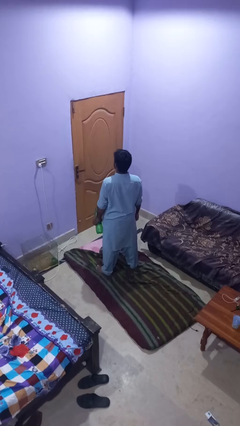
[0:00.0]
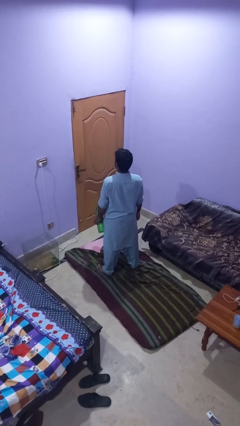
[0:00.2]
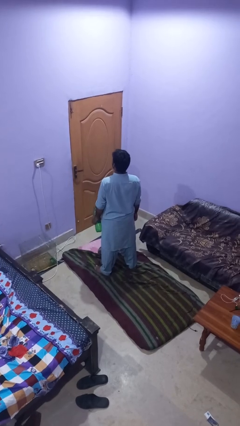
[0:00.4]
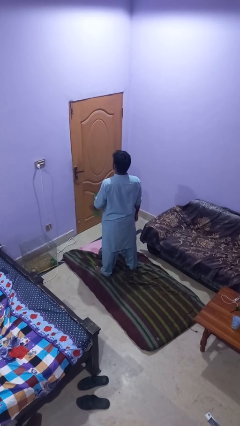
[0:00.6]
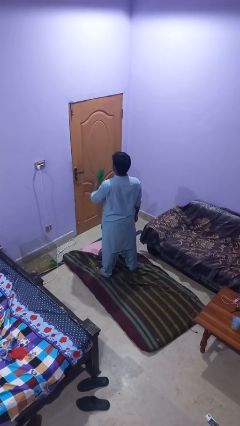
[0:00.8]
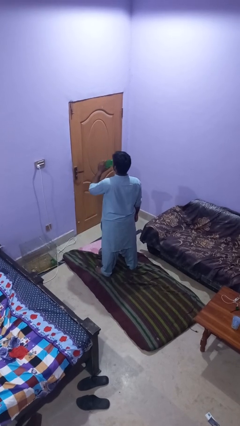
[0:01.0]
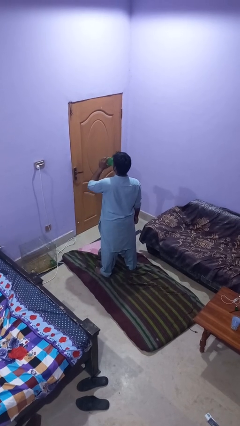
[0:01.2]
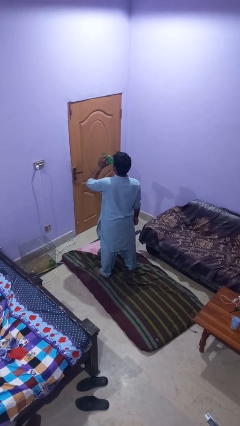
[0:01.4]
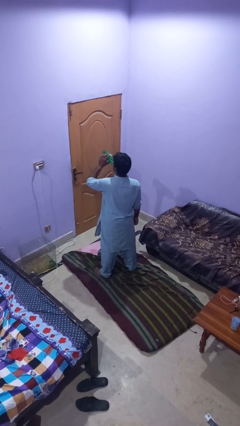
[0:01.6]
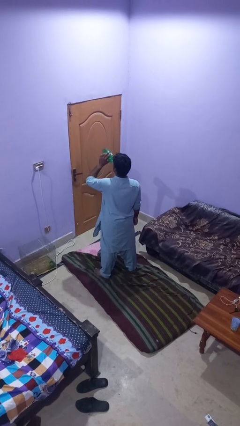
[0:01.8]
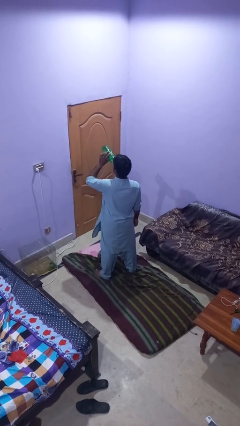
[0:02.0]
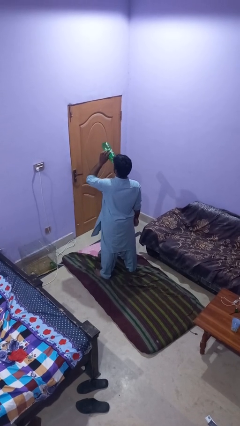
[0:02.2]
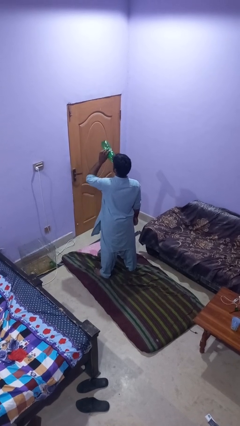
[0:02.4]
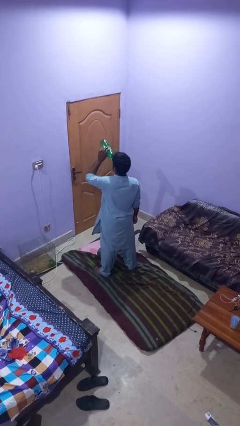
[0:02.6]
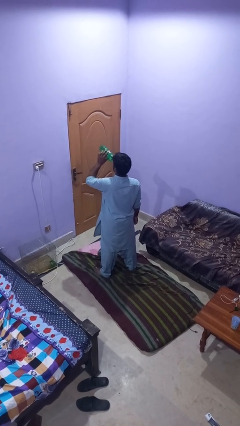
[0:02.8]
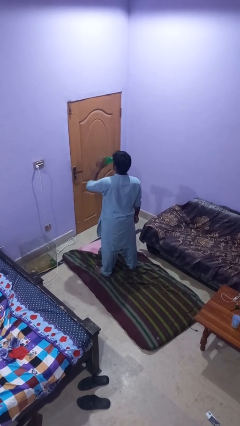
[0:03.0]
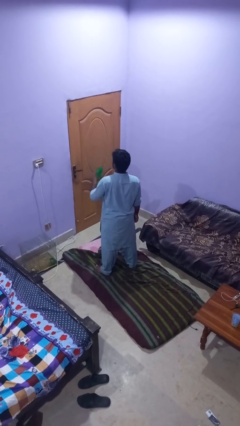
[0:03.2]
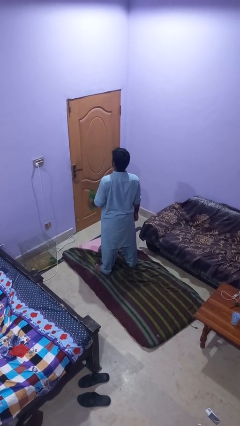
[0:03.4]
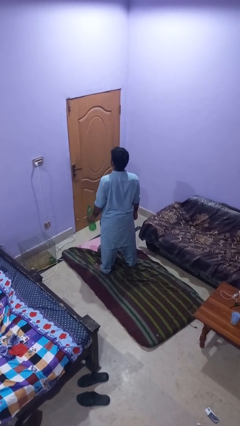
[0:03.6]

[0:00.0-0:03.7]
person drinks from bottle

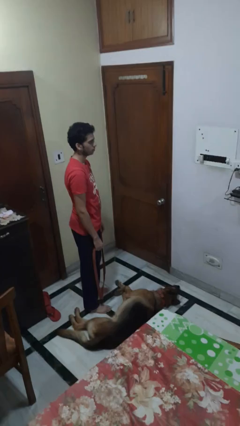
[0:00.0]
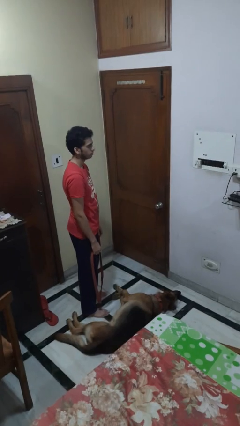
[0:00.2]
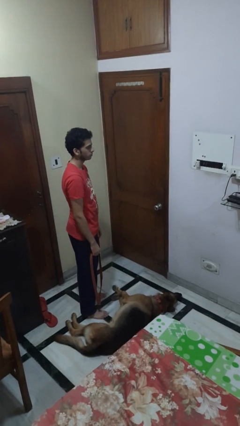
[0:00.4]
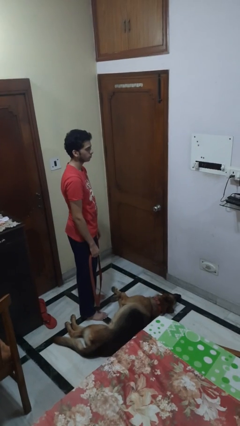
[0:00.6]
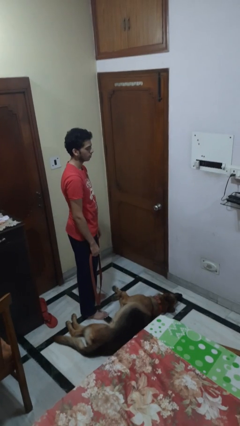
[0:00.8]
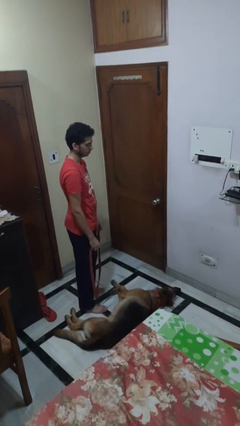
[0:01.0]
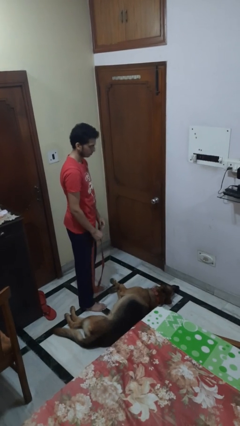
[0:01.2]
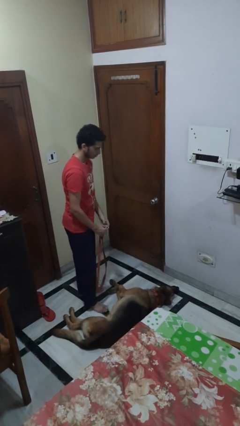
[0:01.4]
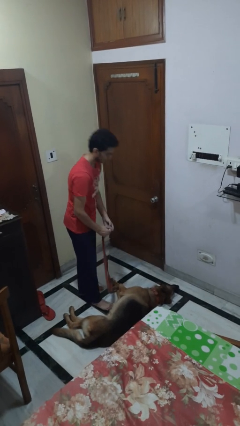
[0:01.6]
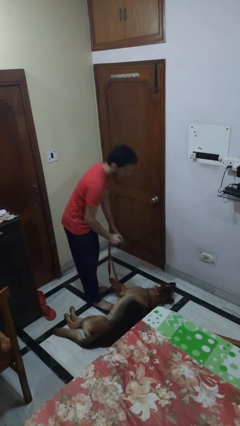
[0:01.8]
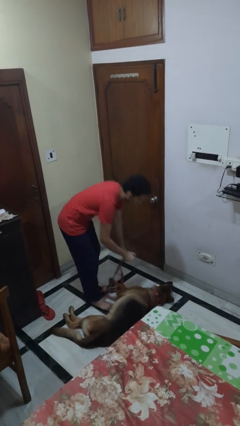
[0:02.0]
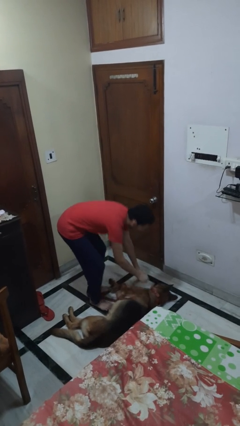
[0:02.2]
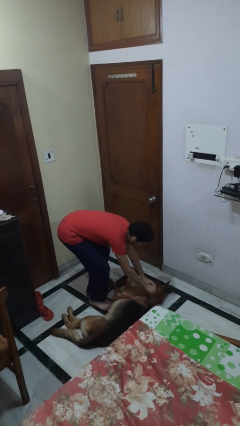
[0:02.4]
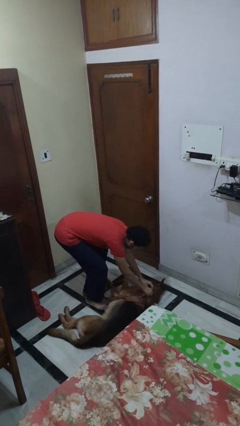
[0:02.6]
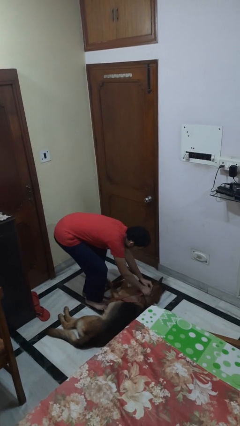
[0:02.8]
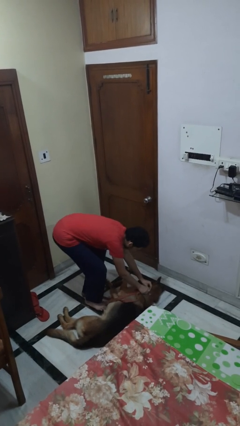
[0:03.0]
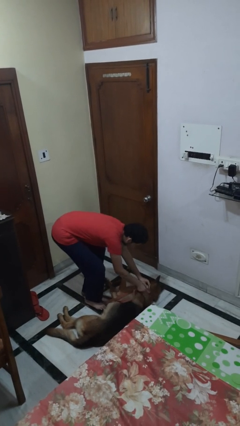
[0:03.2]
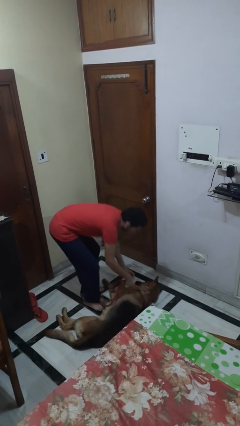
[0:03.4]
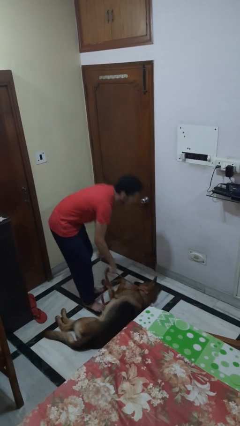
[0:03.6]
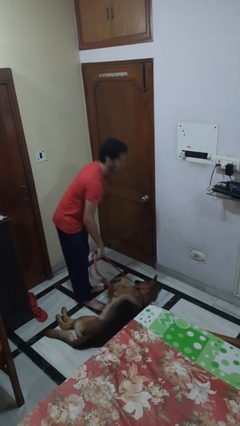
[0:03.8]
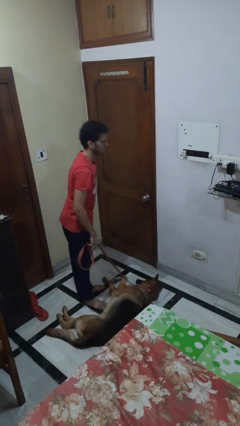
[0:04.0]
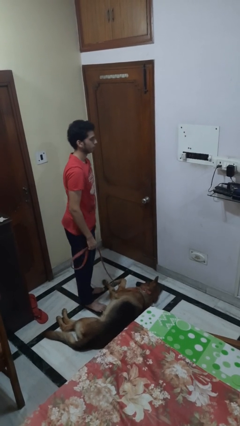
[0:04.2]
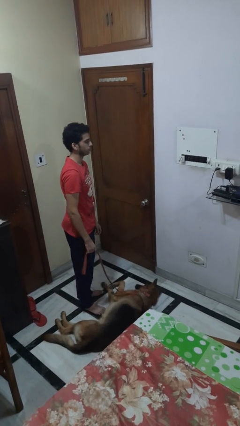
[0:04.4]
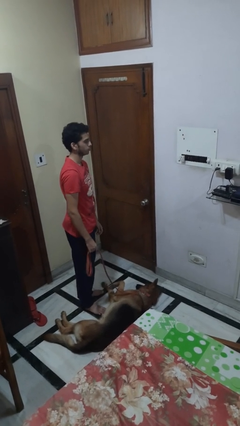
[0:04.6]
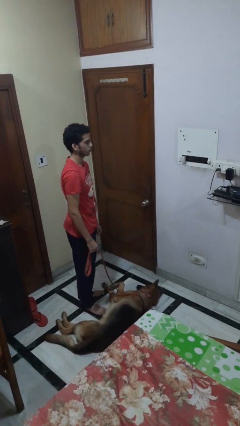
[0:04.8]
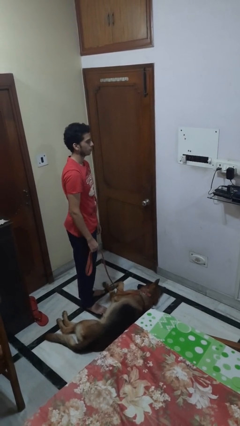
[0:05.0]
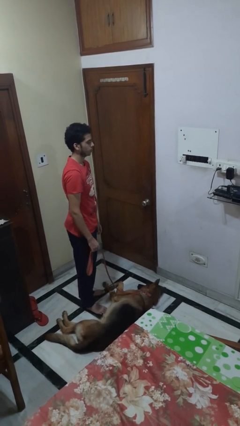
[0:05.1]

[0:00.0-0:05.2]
person attaches leash to dog

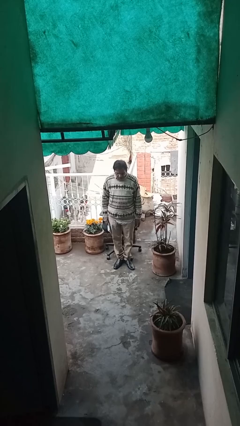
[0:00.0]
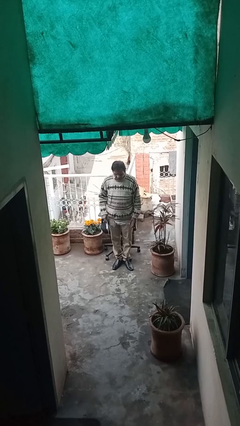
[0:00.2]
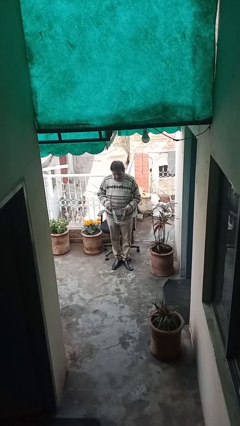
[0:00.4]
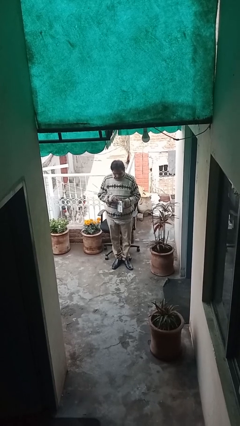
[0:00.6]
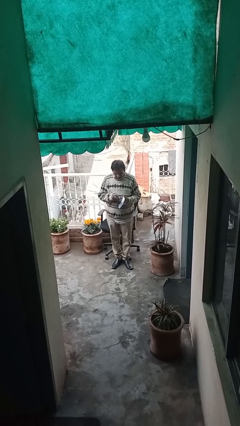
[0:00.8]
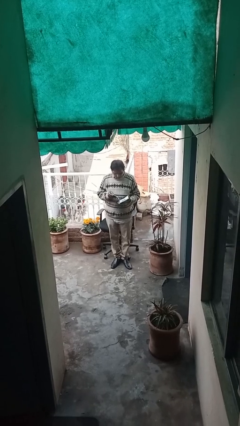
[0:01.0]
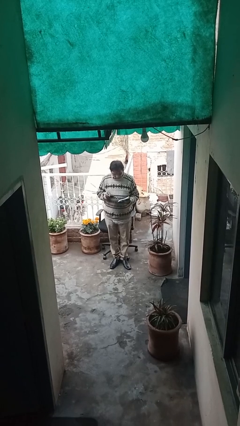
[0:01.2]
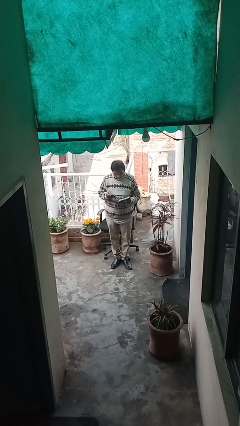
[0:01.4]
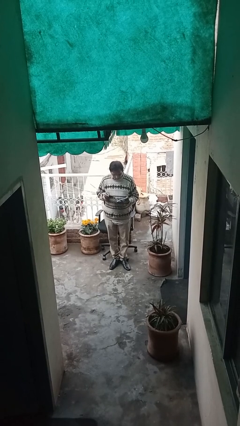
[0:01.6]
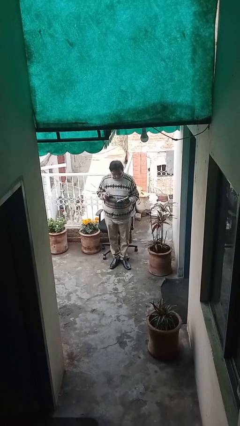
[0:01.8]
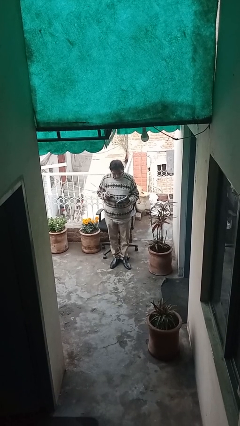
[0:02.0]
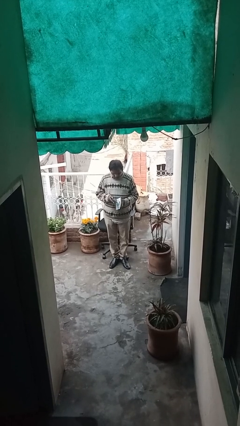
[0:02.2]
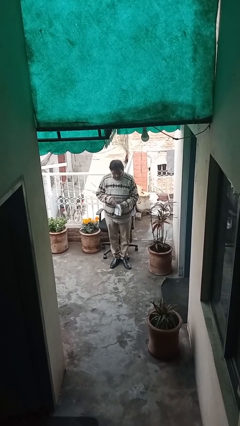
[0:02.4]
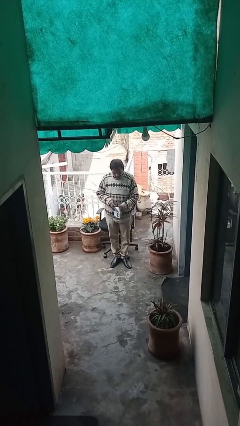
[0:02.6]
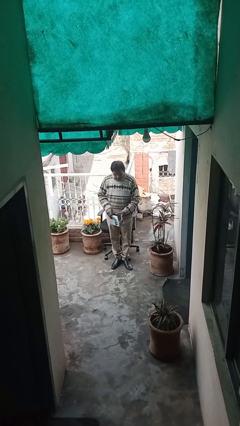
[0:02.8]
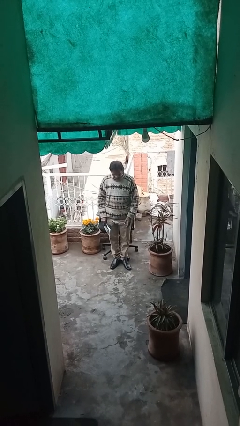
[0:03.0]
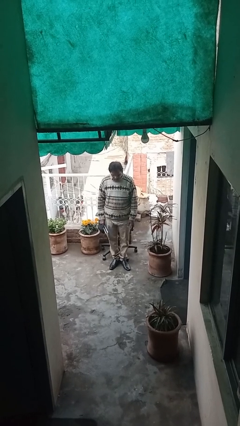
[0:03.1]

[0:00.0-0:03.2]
person reads document

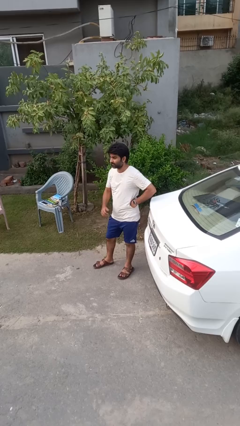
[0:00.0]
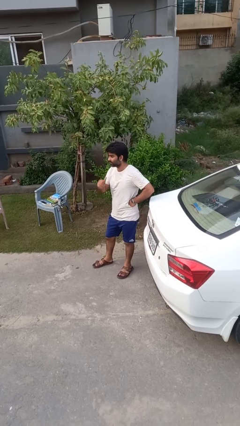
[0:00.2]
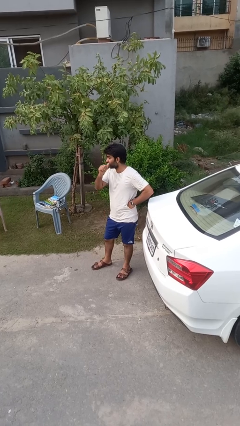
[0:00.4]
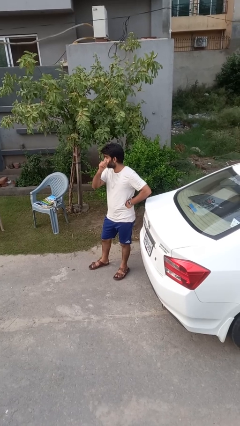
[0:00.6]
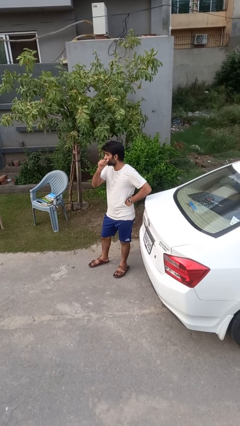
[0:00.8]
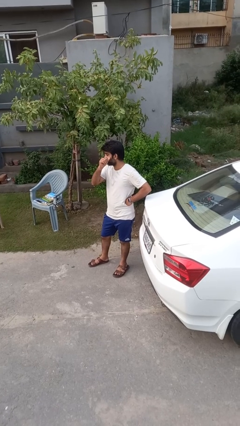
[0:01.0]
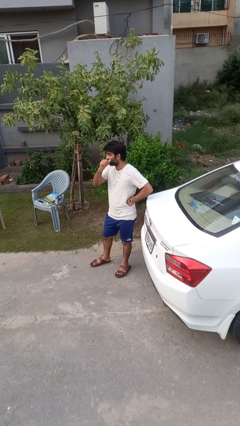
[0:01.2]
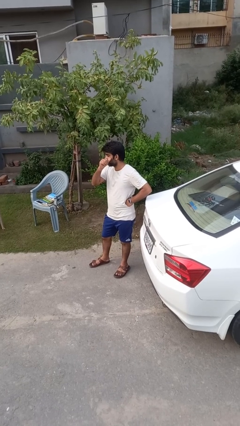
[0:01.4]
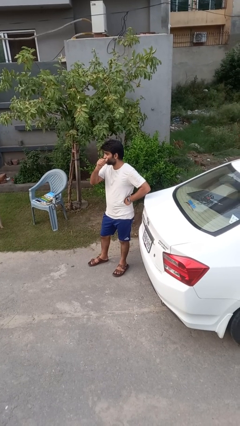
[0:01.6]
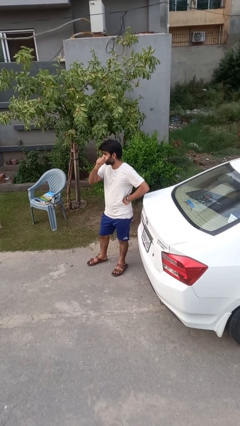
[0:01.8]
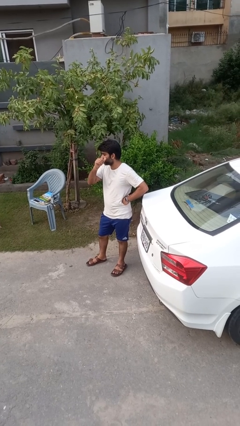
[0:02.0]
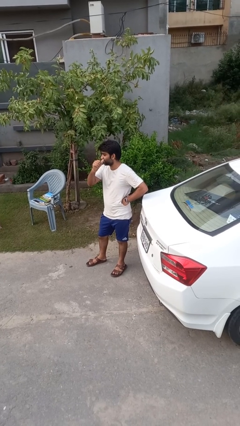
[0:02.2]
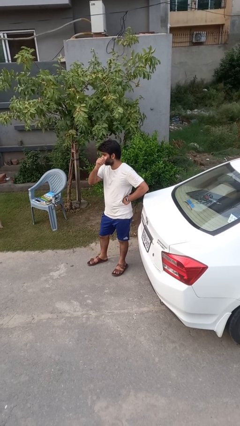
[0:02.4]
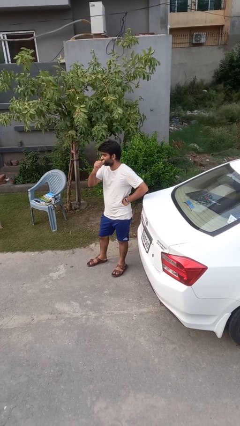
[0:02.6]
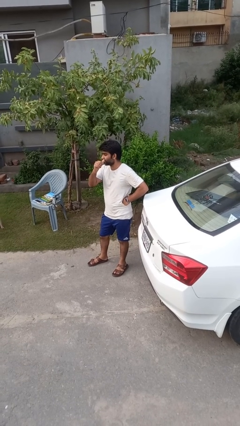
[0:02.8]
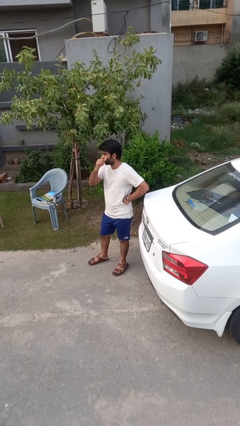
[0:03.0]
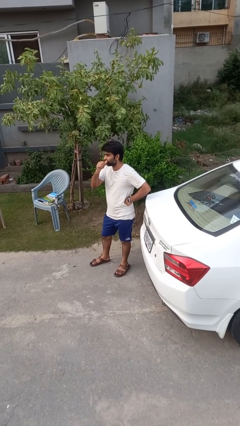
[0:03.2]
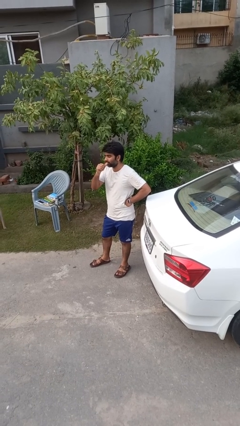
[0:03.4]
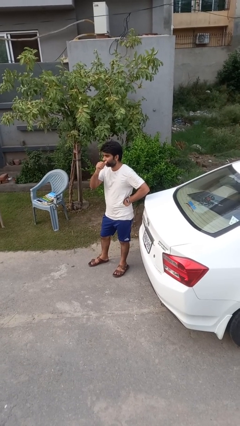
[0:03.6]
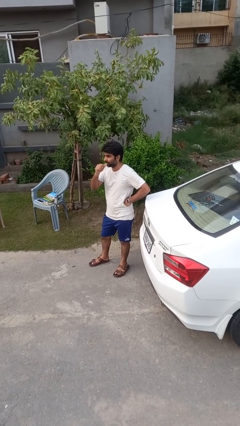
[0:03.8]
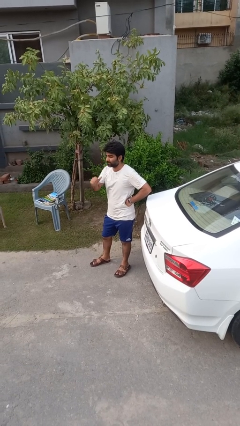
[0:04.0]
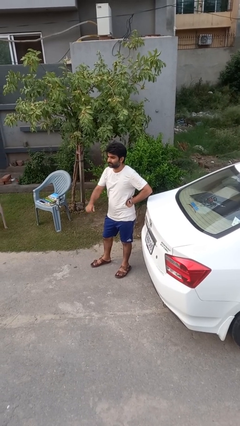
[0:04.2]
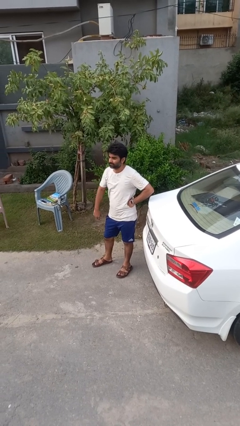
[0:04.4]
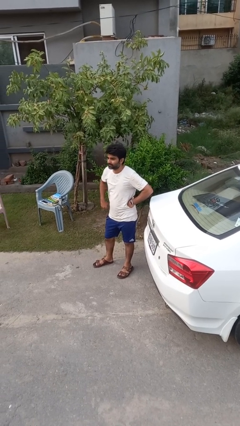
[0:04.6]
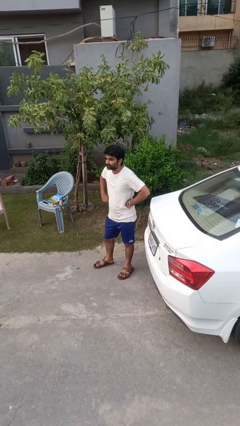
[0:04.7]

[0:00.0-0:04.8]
person scratches face

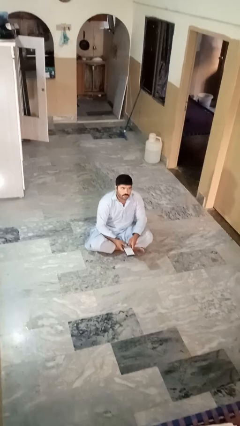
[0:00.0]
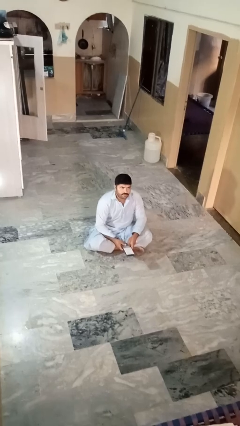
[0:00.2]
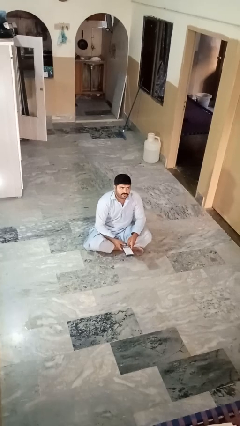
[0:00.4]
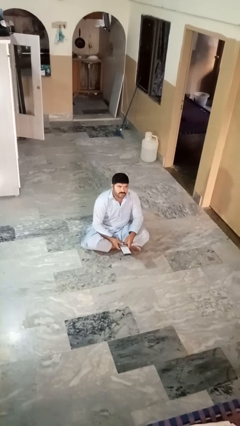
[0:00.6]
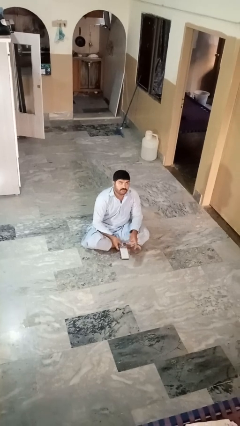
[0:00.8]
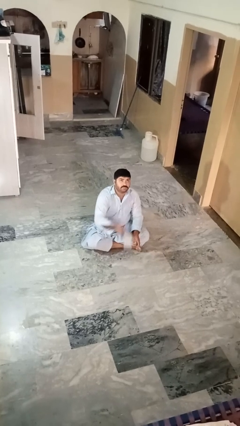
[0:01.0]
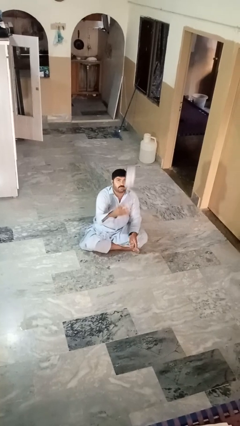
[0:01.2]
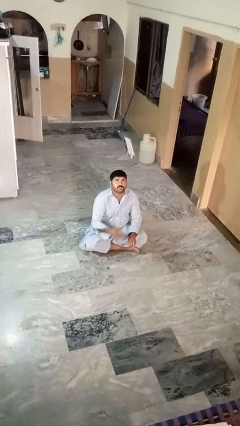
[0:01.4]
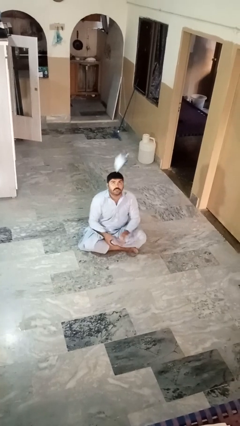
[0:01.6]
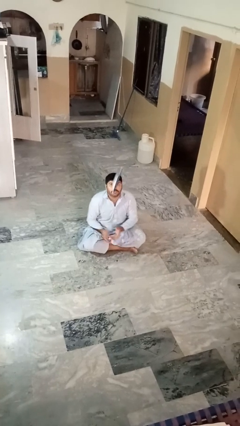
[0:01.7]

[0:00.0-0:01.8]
person drops object
